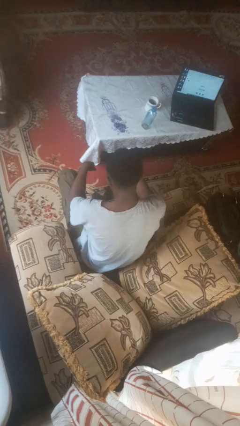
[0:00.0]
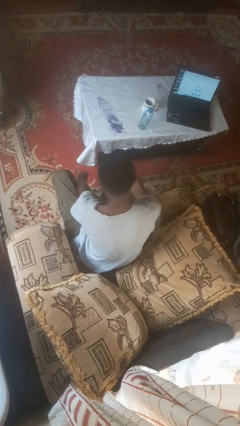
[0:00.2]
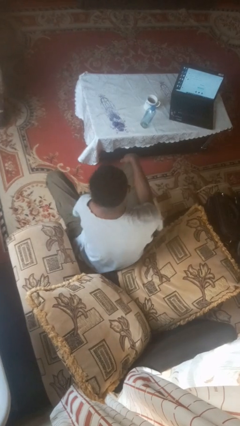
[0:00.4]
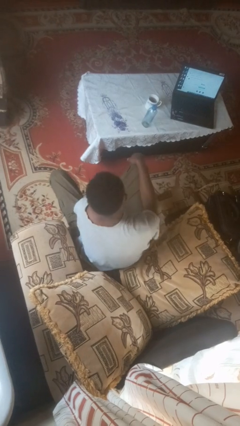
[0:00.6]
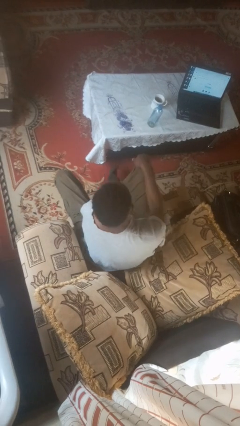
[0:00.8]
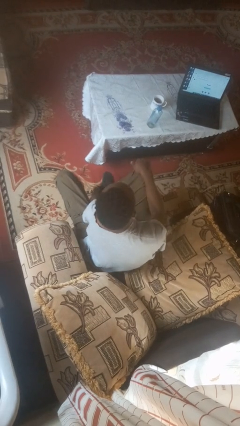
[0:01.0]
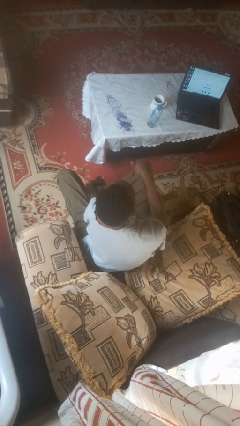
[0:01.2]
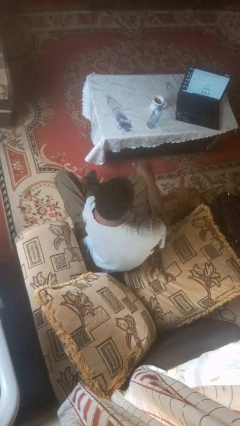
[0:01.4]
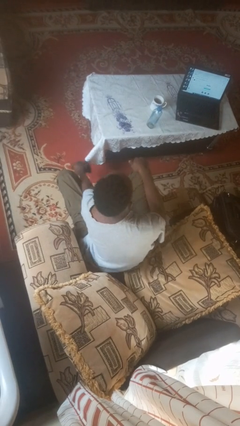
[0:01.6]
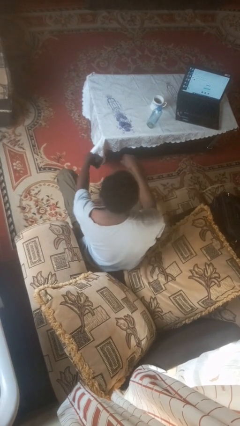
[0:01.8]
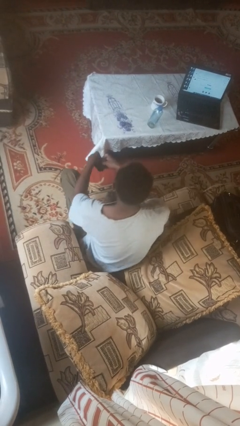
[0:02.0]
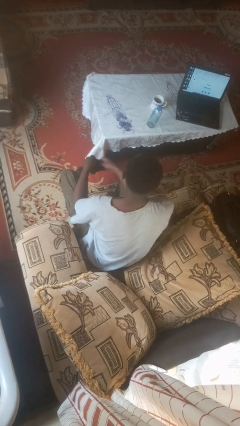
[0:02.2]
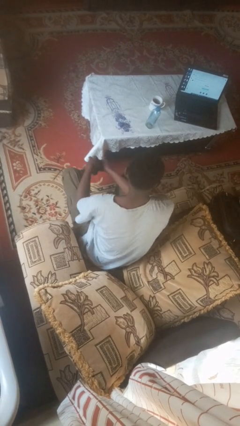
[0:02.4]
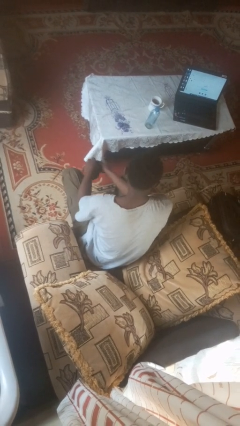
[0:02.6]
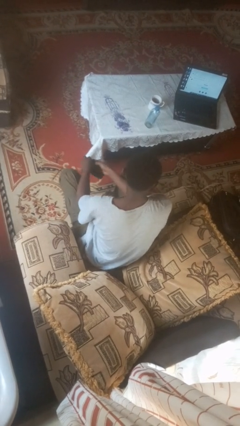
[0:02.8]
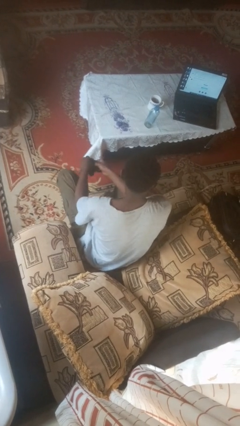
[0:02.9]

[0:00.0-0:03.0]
person takes off socks

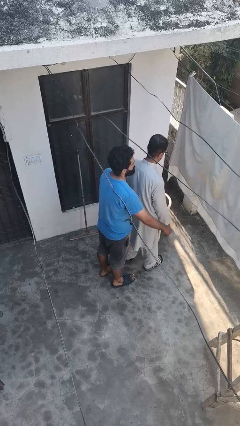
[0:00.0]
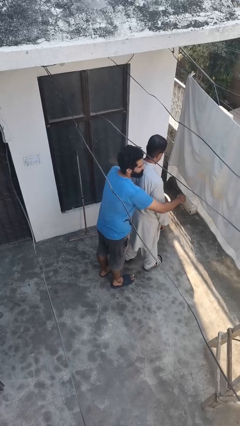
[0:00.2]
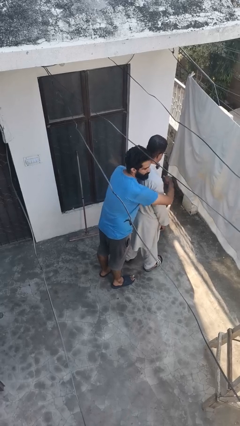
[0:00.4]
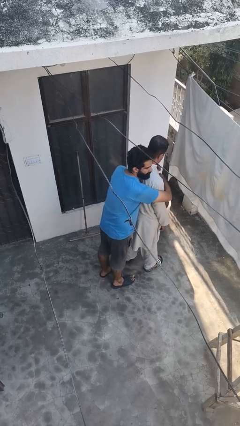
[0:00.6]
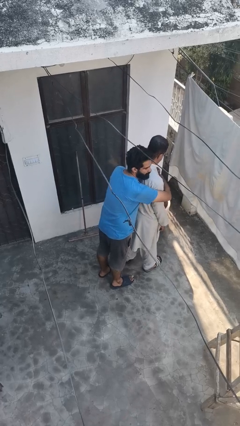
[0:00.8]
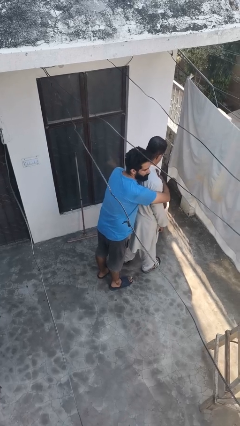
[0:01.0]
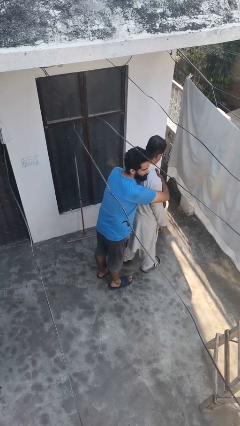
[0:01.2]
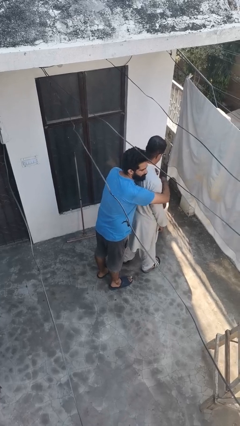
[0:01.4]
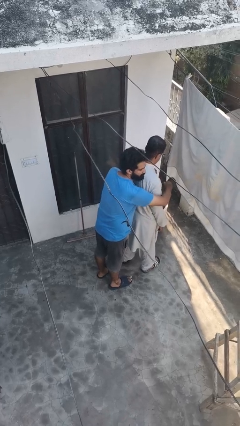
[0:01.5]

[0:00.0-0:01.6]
person hugs person from behind

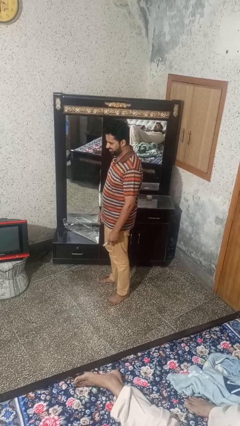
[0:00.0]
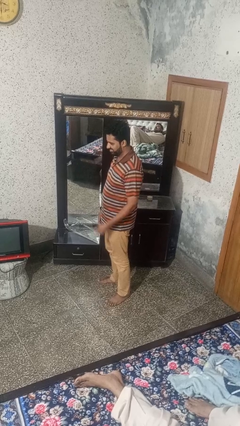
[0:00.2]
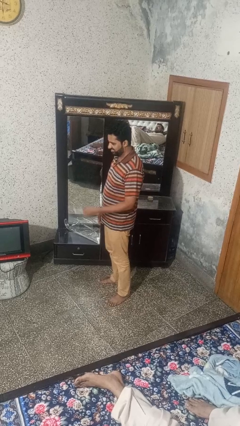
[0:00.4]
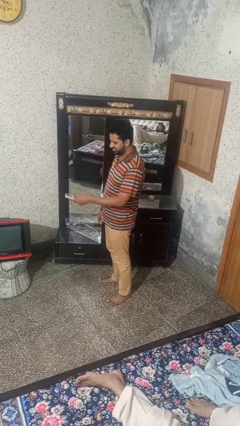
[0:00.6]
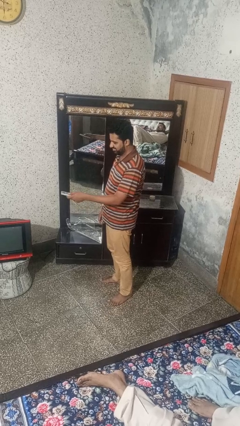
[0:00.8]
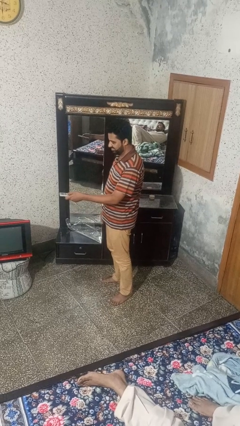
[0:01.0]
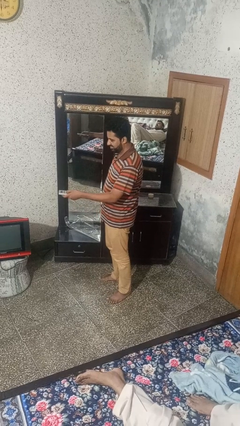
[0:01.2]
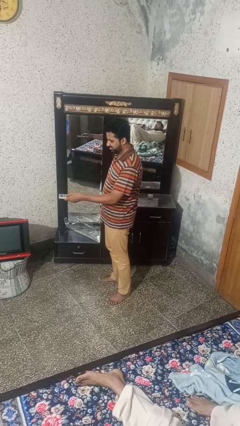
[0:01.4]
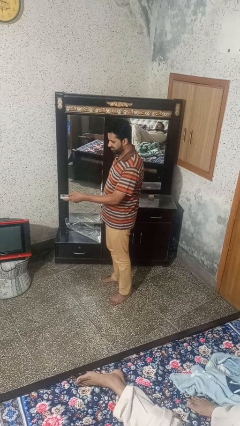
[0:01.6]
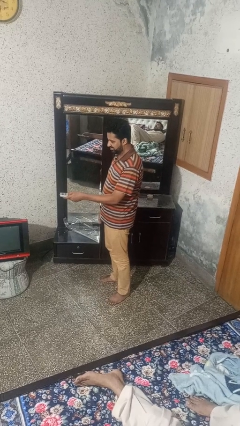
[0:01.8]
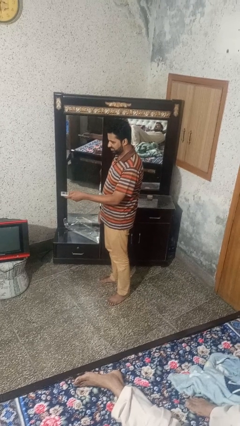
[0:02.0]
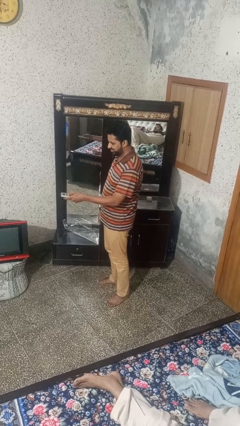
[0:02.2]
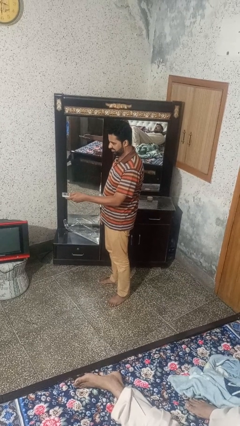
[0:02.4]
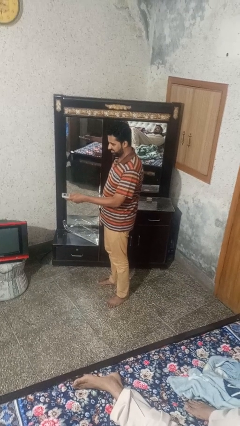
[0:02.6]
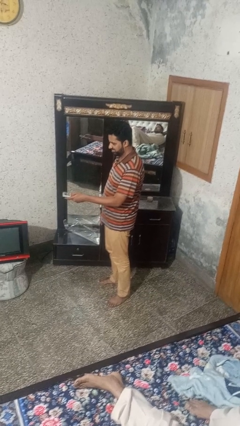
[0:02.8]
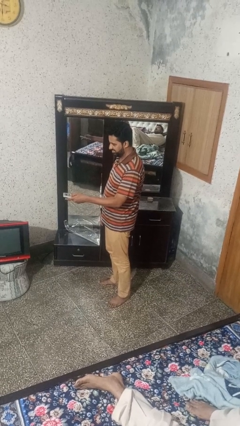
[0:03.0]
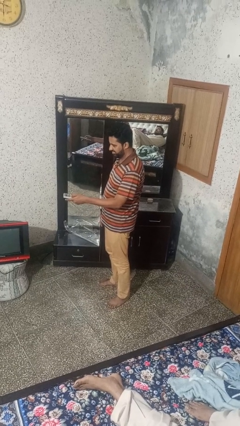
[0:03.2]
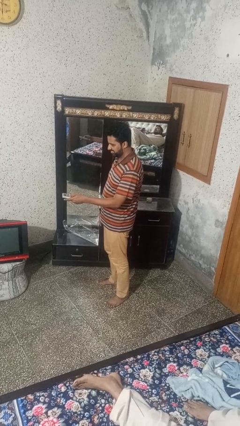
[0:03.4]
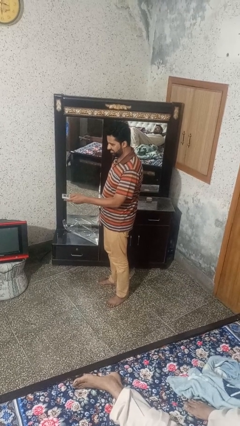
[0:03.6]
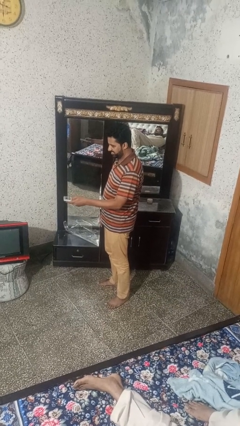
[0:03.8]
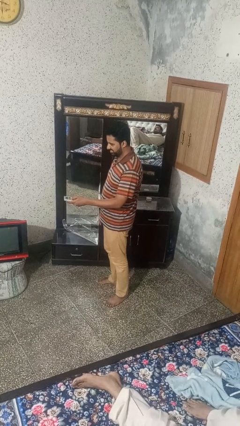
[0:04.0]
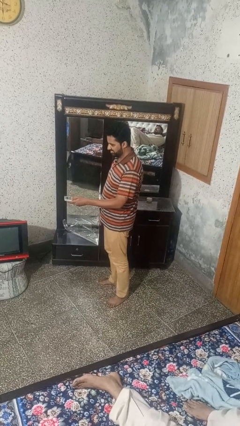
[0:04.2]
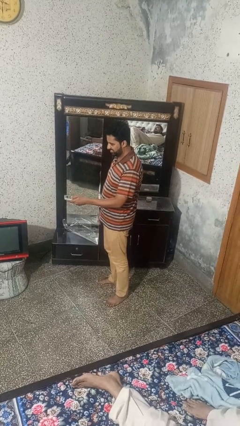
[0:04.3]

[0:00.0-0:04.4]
person uses television remote

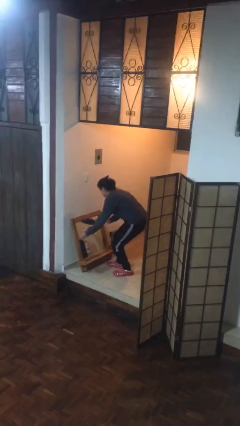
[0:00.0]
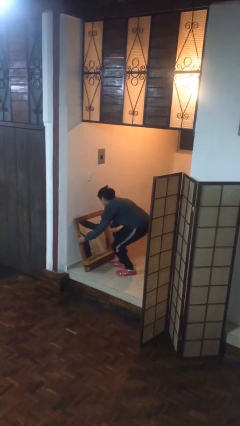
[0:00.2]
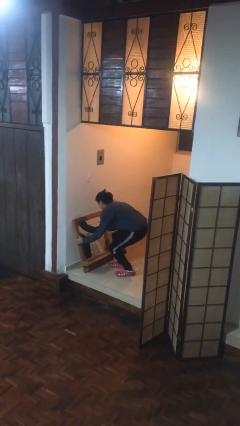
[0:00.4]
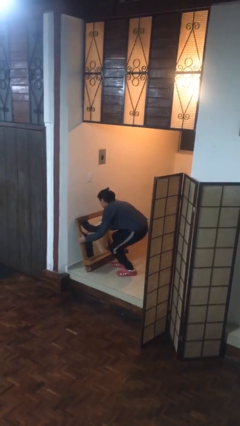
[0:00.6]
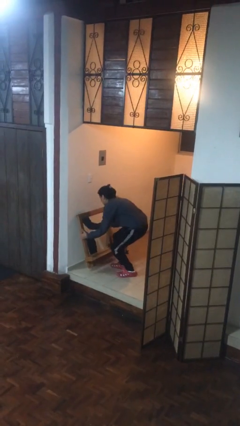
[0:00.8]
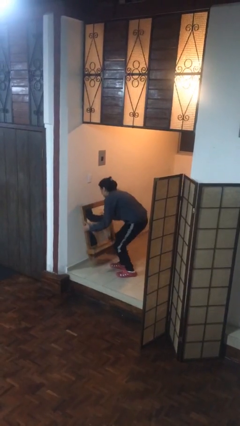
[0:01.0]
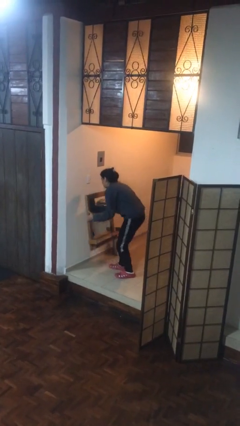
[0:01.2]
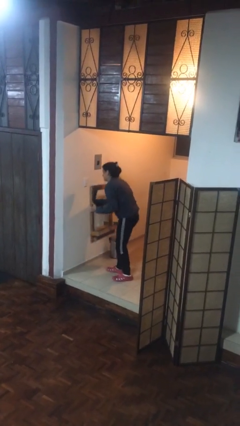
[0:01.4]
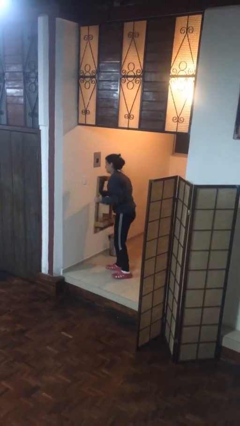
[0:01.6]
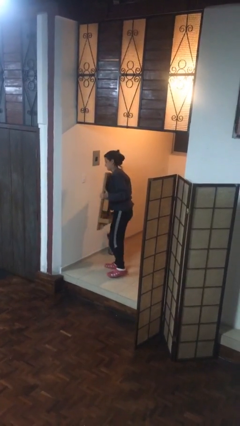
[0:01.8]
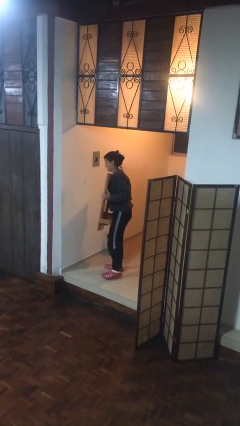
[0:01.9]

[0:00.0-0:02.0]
person picks up object from floor

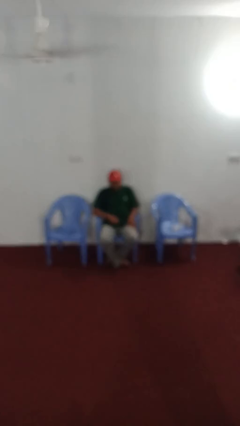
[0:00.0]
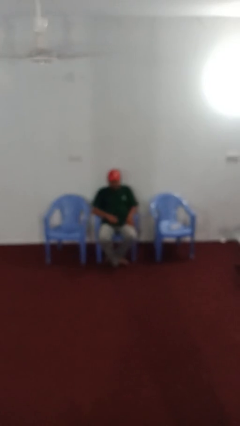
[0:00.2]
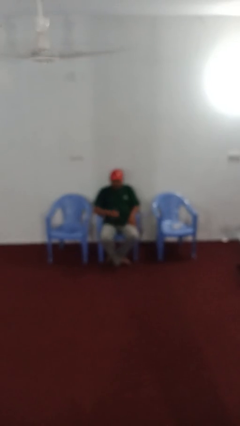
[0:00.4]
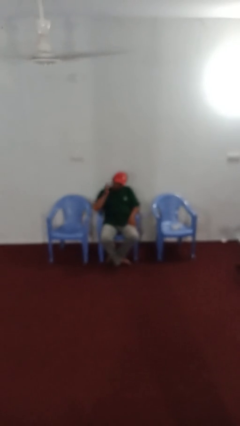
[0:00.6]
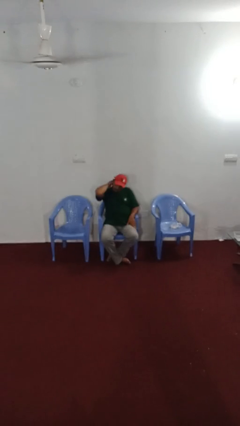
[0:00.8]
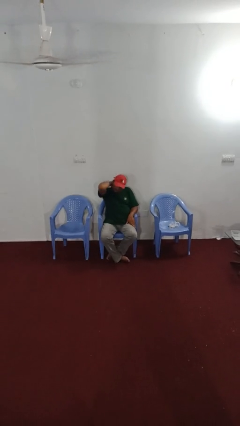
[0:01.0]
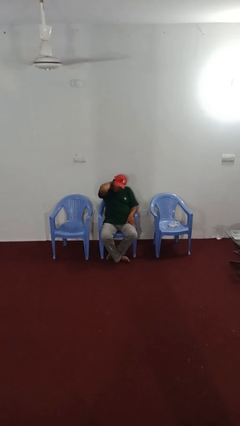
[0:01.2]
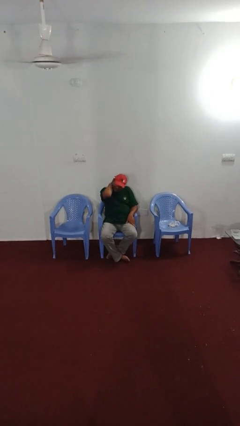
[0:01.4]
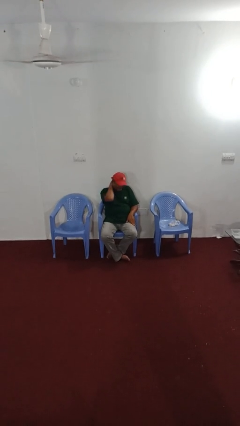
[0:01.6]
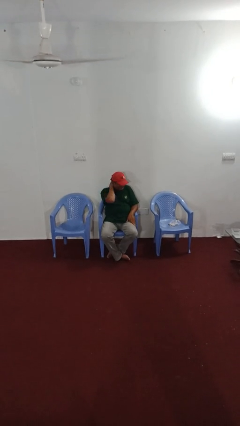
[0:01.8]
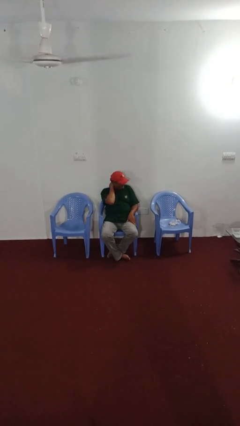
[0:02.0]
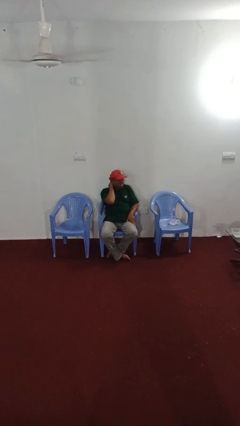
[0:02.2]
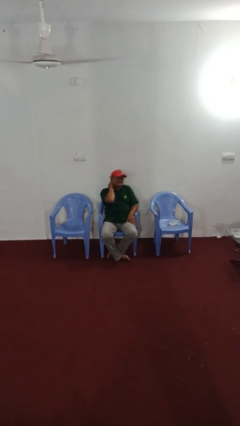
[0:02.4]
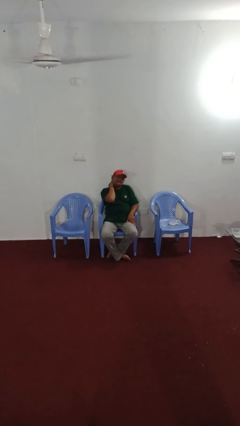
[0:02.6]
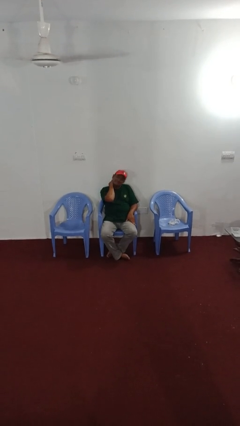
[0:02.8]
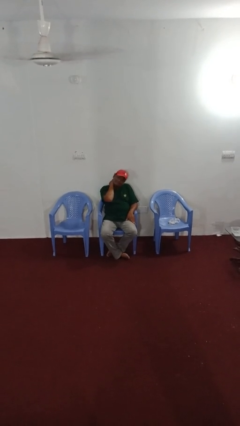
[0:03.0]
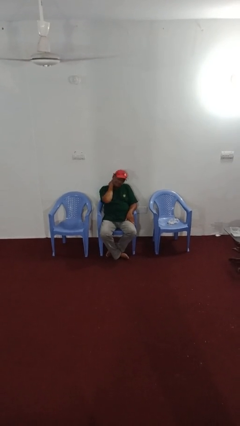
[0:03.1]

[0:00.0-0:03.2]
person rubs neck

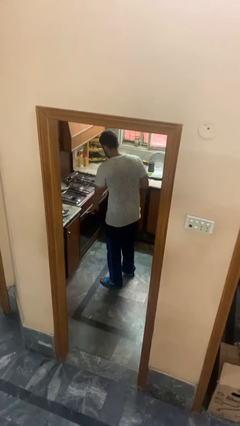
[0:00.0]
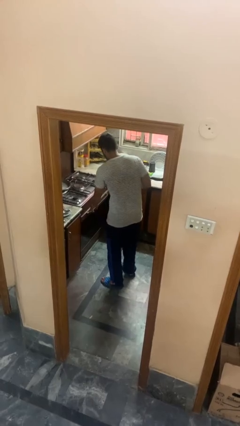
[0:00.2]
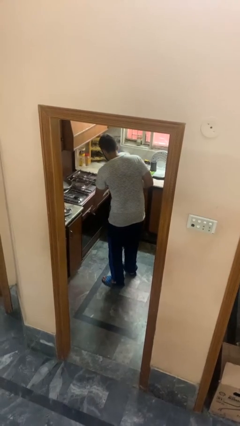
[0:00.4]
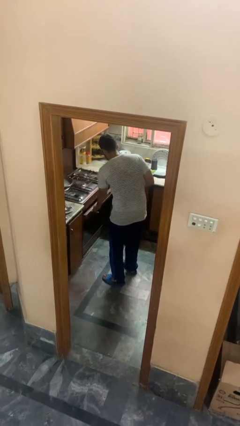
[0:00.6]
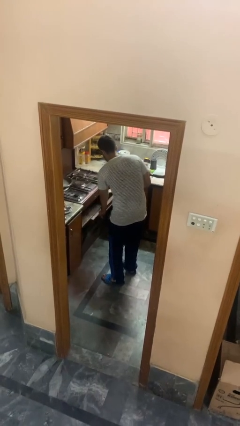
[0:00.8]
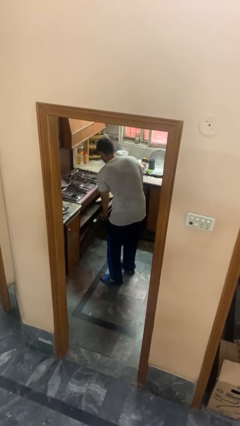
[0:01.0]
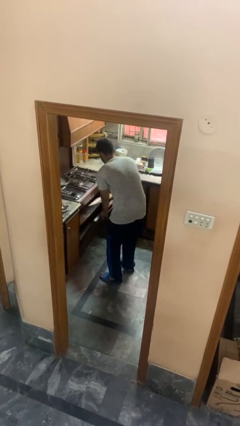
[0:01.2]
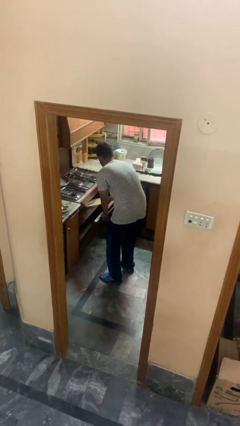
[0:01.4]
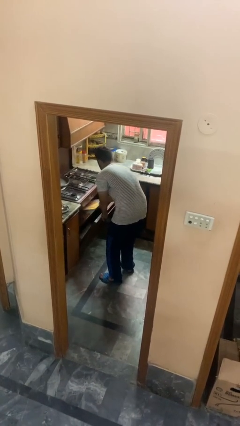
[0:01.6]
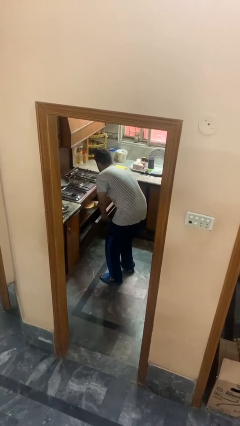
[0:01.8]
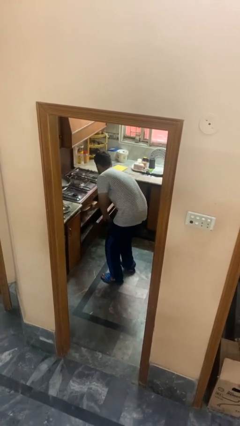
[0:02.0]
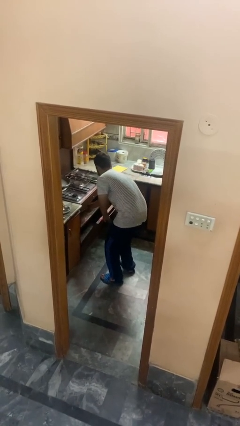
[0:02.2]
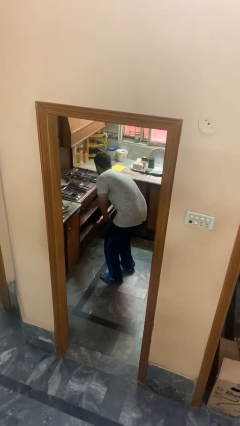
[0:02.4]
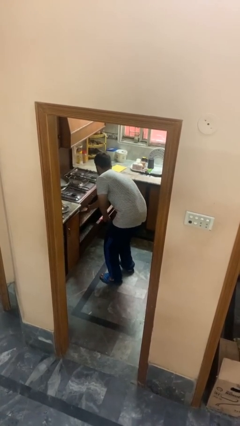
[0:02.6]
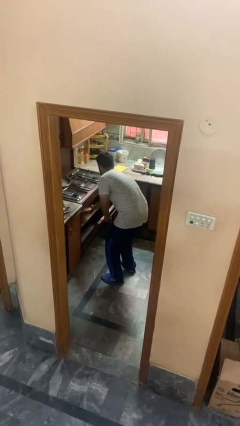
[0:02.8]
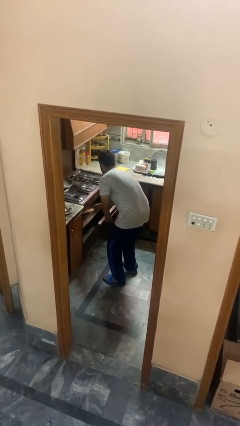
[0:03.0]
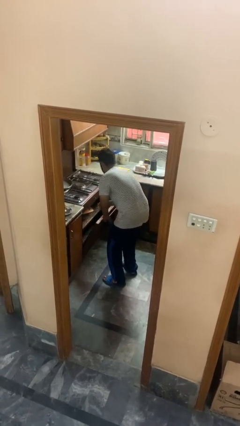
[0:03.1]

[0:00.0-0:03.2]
person puts object into oven
